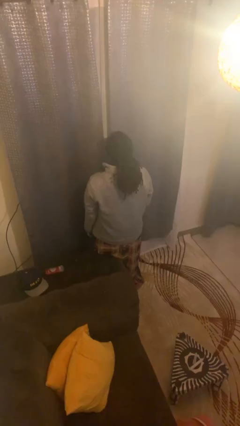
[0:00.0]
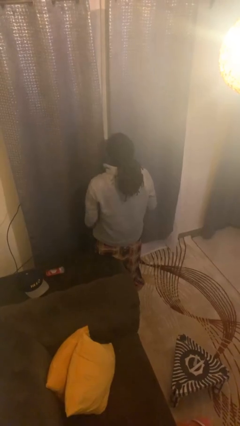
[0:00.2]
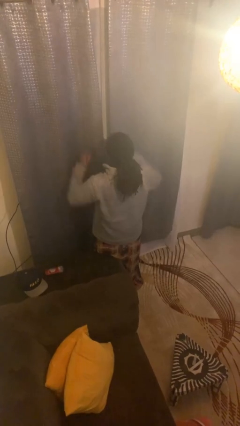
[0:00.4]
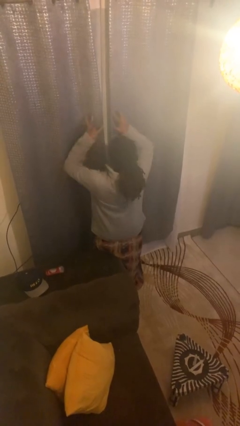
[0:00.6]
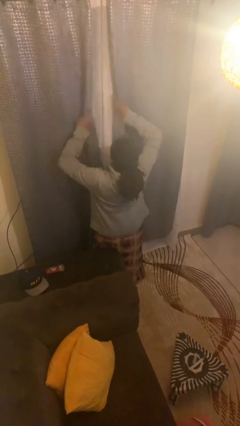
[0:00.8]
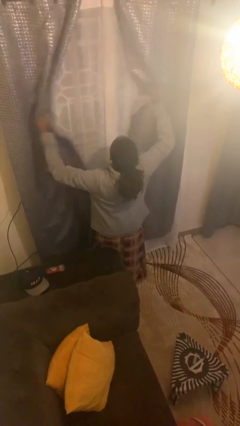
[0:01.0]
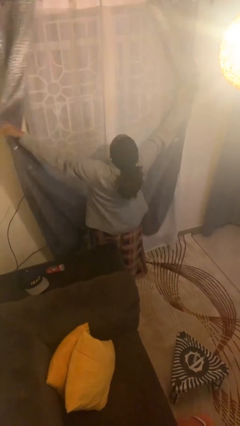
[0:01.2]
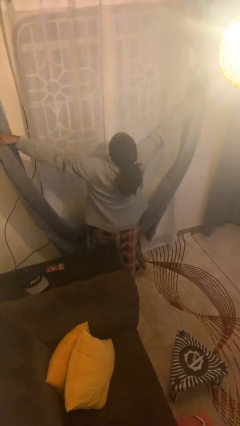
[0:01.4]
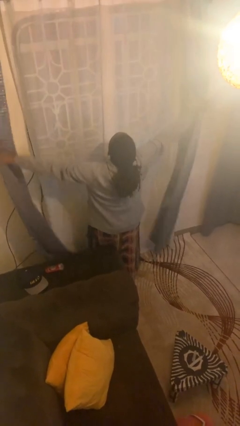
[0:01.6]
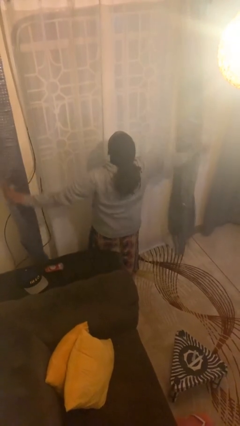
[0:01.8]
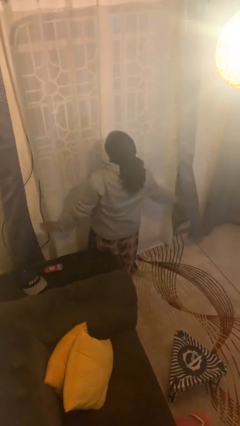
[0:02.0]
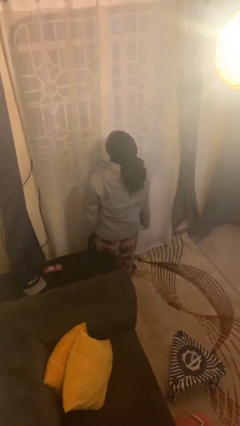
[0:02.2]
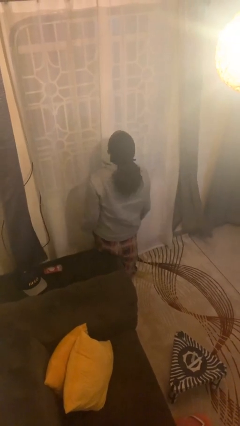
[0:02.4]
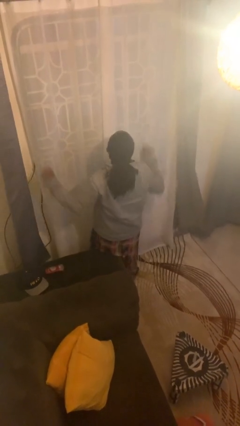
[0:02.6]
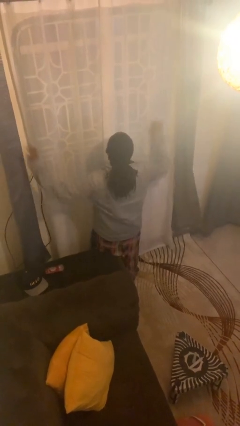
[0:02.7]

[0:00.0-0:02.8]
person opens curtains

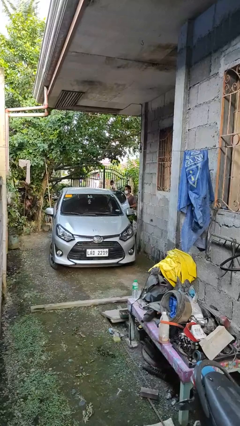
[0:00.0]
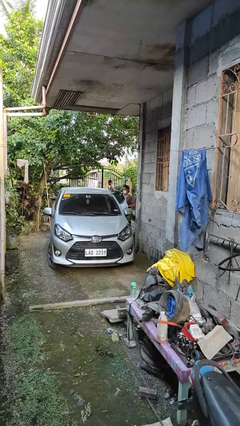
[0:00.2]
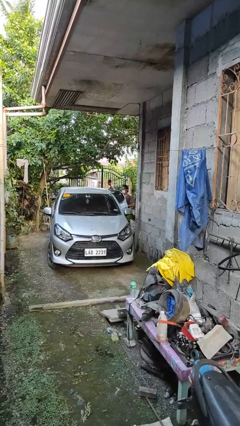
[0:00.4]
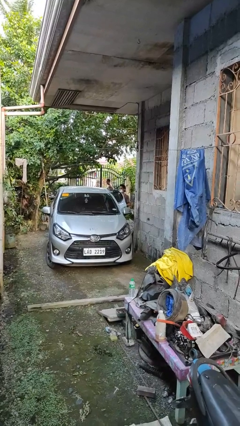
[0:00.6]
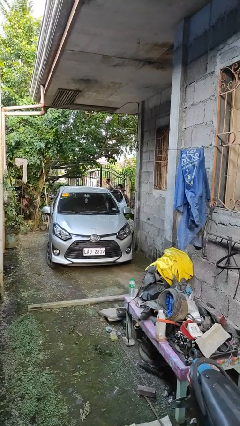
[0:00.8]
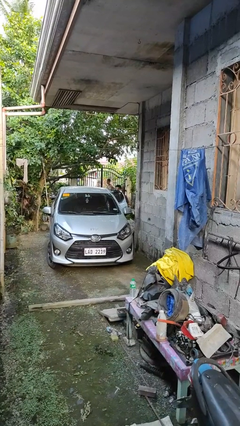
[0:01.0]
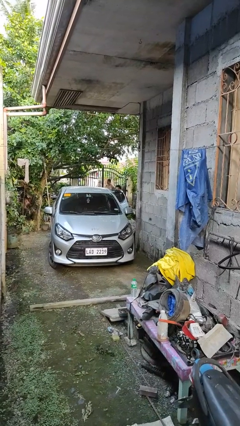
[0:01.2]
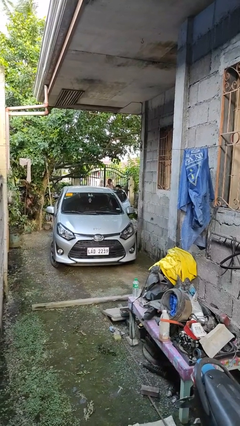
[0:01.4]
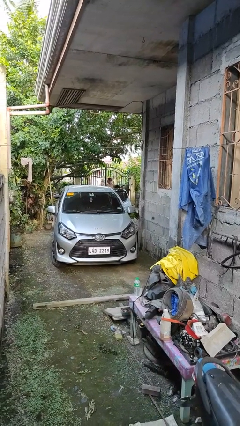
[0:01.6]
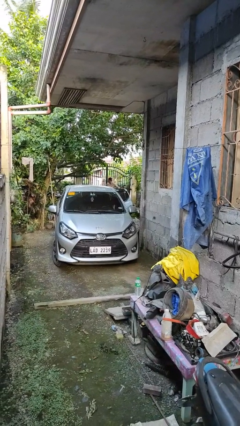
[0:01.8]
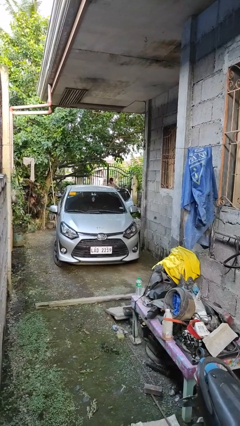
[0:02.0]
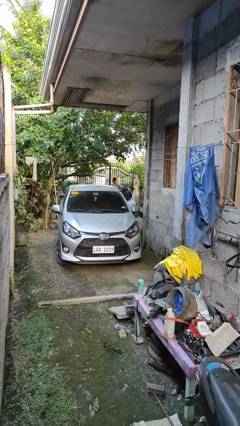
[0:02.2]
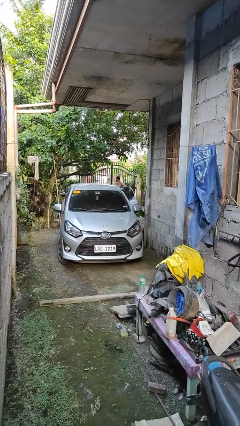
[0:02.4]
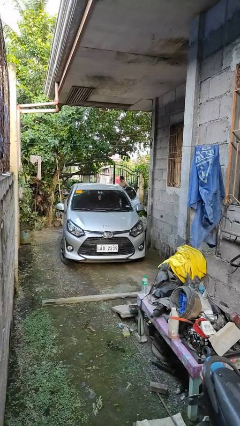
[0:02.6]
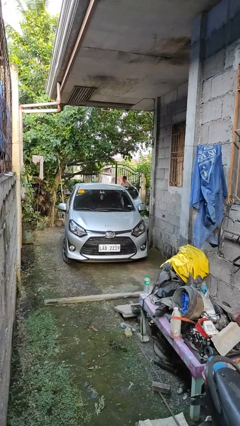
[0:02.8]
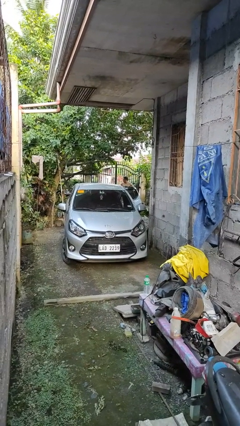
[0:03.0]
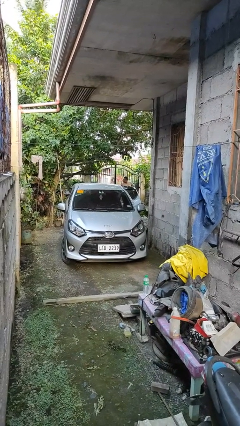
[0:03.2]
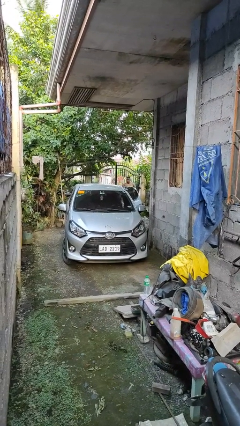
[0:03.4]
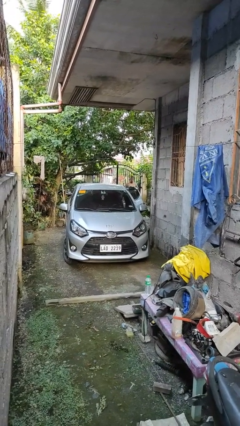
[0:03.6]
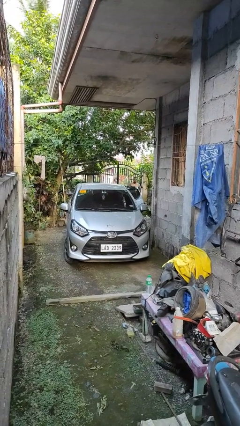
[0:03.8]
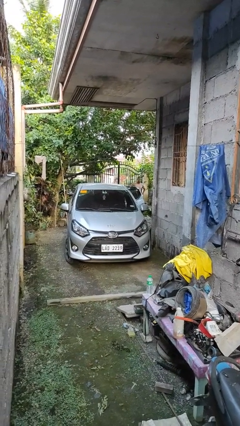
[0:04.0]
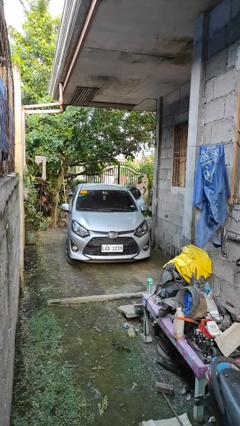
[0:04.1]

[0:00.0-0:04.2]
person enters car

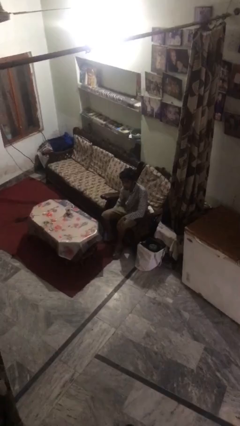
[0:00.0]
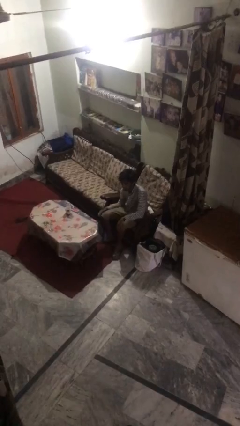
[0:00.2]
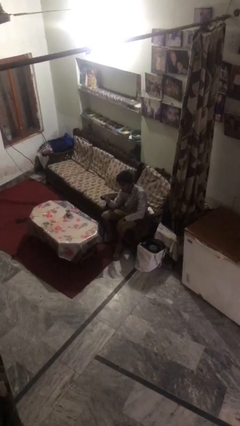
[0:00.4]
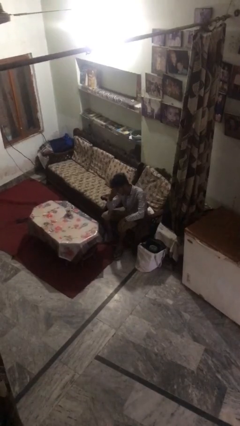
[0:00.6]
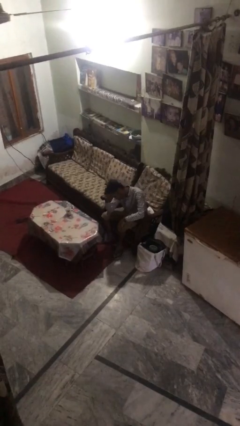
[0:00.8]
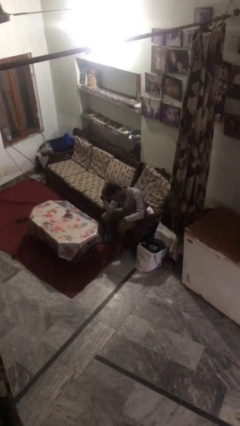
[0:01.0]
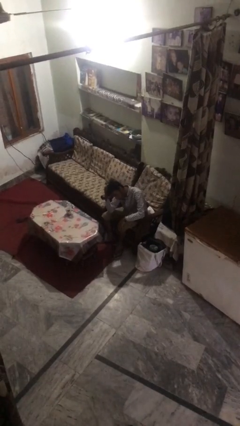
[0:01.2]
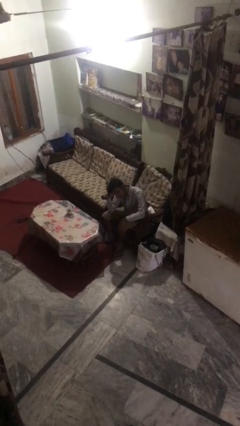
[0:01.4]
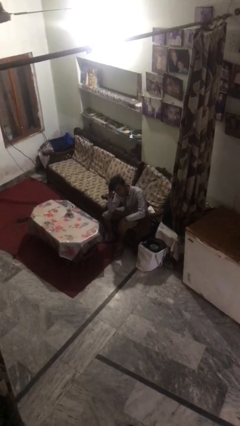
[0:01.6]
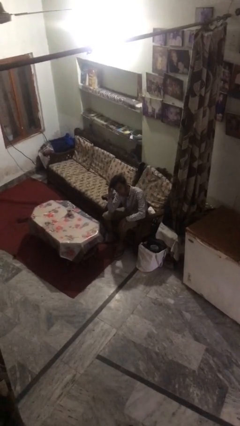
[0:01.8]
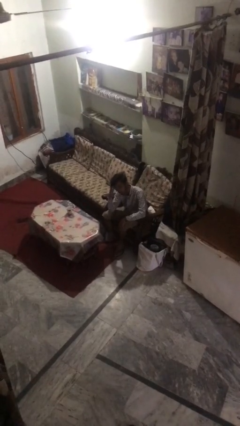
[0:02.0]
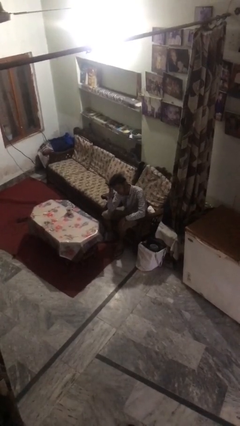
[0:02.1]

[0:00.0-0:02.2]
person strokes hair

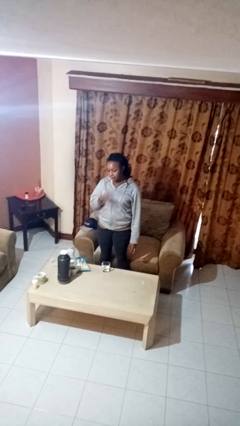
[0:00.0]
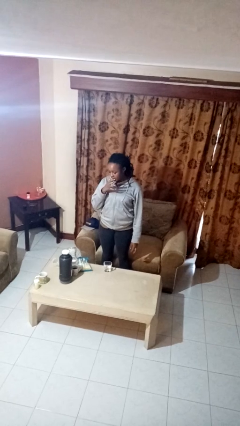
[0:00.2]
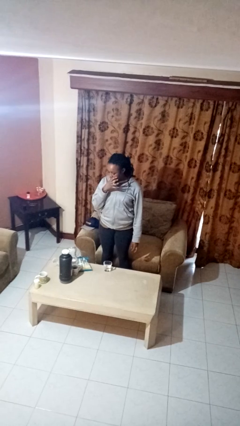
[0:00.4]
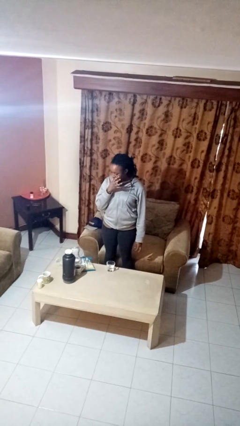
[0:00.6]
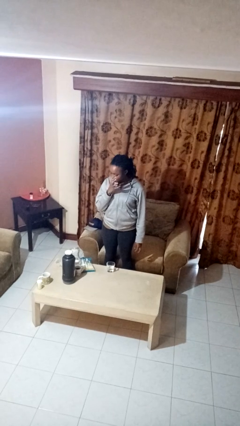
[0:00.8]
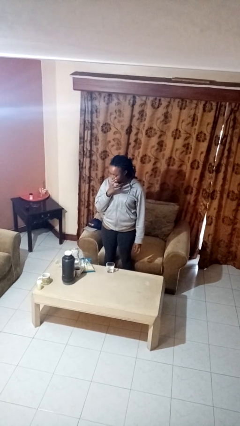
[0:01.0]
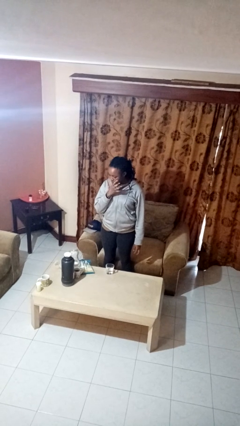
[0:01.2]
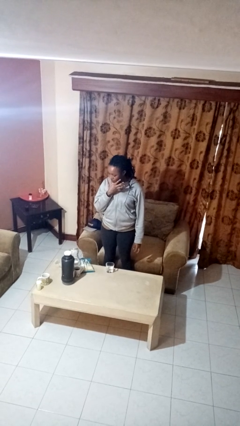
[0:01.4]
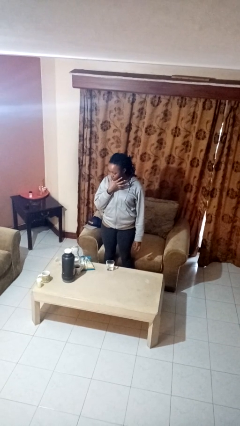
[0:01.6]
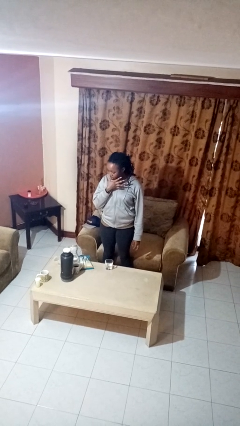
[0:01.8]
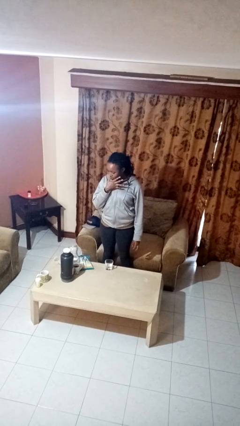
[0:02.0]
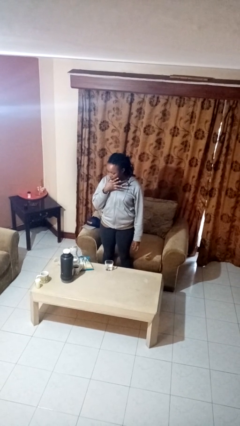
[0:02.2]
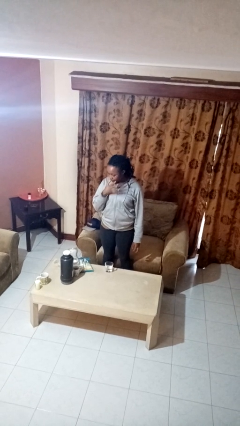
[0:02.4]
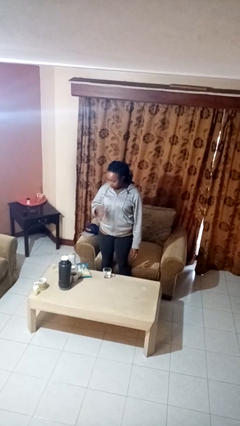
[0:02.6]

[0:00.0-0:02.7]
person licks fingers

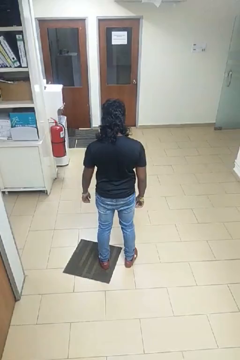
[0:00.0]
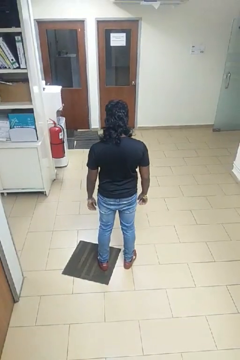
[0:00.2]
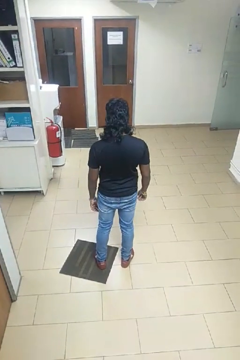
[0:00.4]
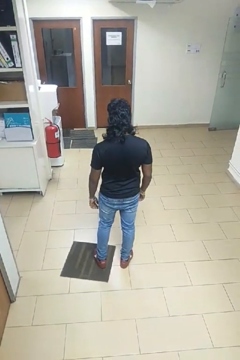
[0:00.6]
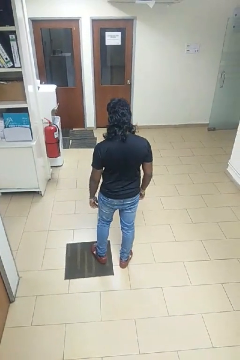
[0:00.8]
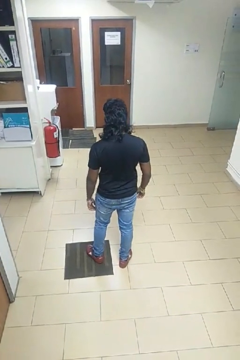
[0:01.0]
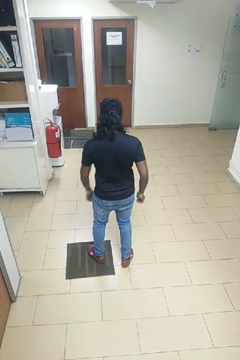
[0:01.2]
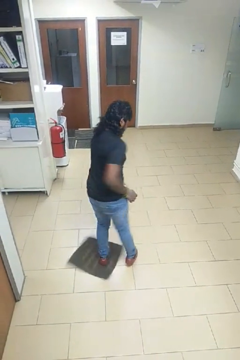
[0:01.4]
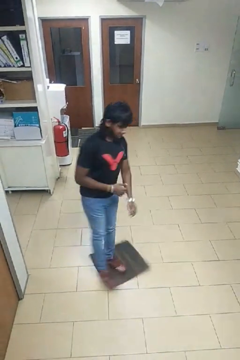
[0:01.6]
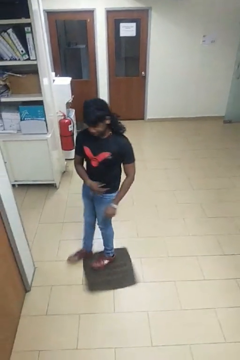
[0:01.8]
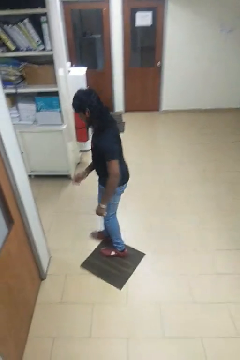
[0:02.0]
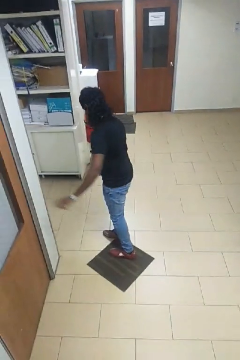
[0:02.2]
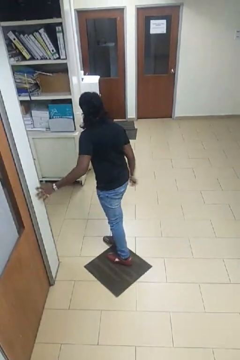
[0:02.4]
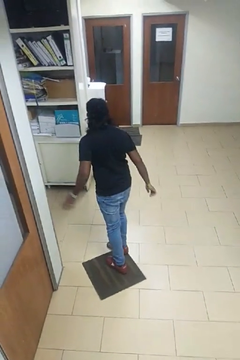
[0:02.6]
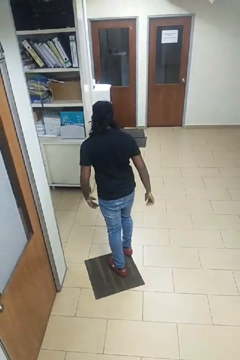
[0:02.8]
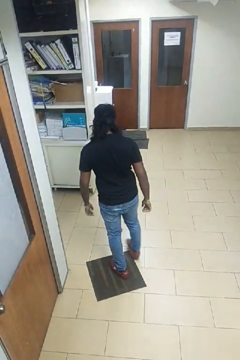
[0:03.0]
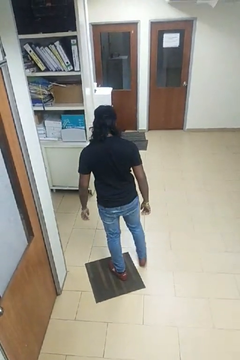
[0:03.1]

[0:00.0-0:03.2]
person twirls

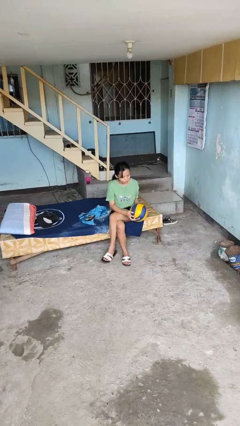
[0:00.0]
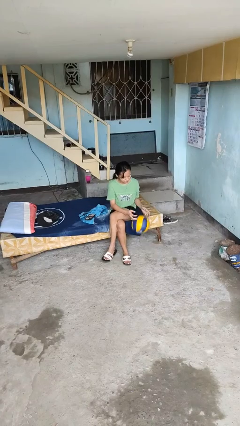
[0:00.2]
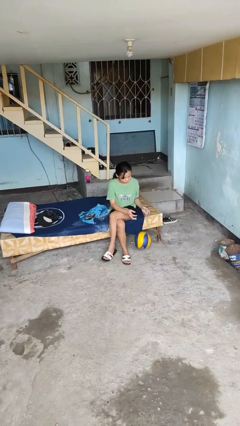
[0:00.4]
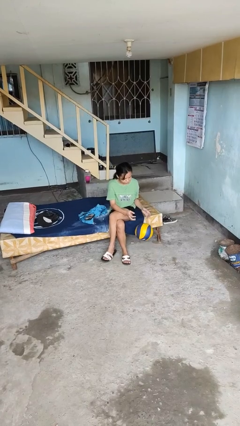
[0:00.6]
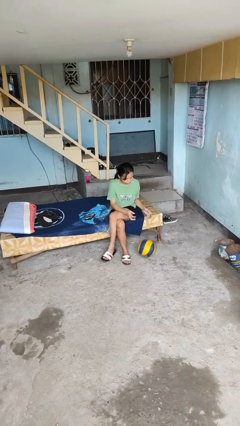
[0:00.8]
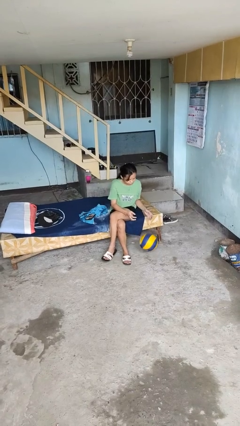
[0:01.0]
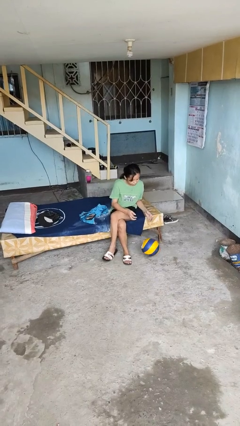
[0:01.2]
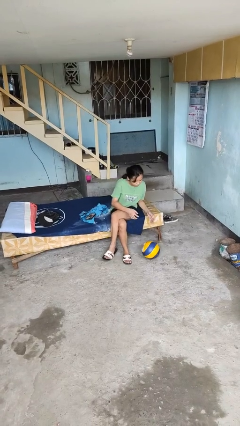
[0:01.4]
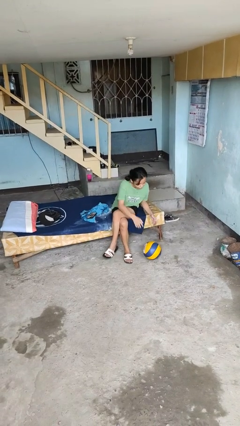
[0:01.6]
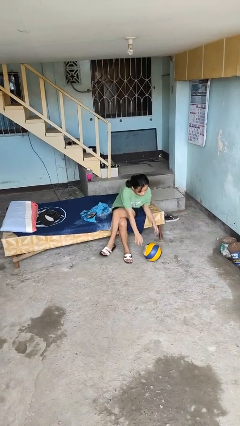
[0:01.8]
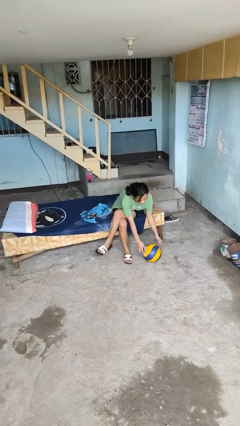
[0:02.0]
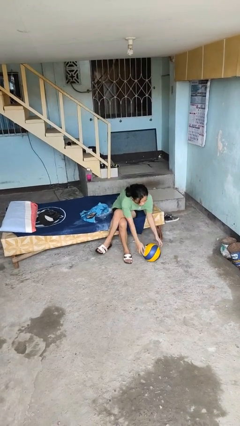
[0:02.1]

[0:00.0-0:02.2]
person drops object

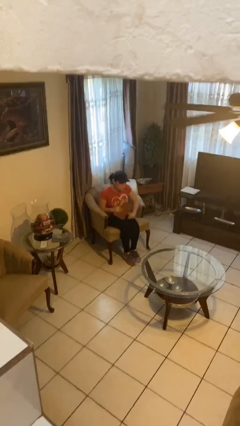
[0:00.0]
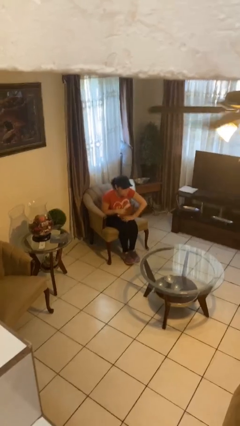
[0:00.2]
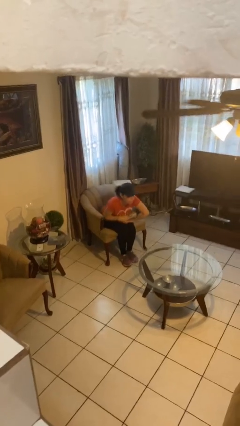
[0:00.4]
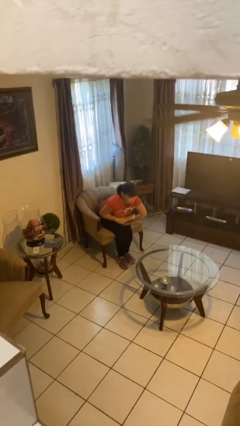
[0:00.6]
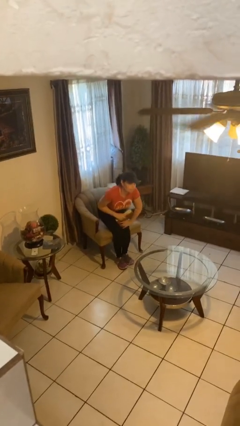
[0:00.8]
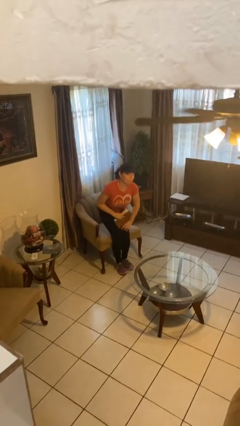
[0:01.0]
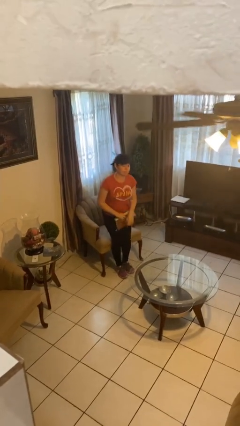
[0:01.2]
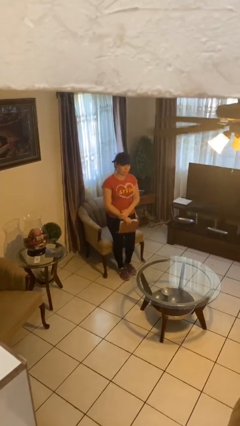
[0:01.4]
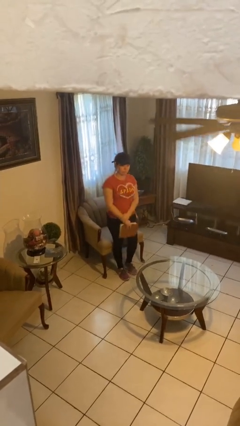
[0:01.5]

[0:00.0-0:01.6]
person stands up
